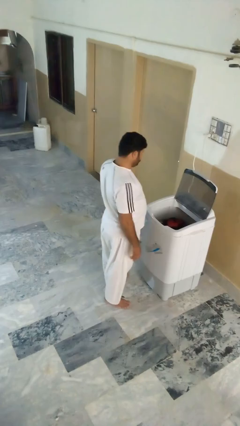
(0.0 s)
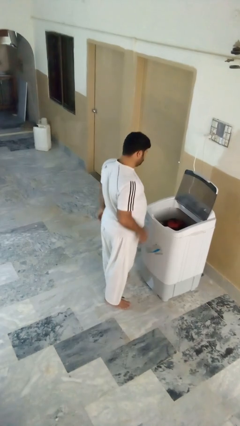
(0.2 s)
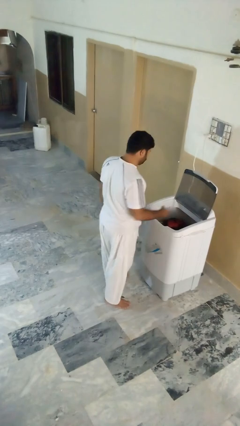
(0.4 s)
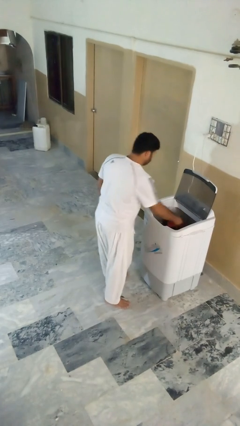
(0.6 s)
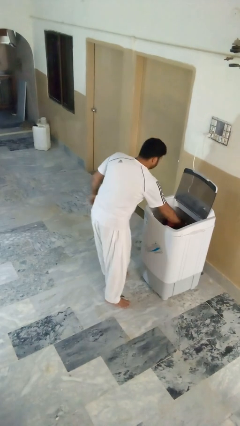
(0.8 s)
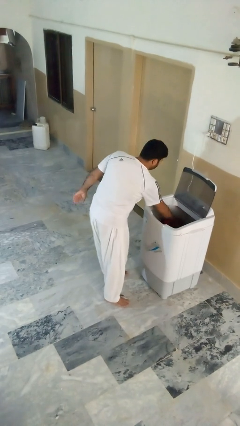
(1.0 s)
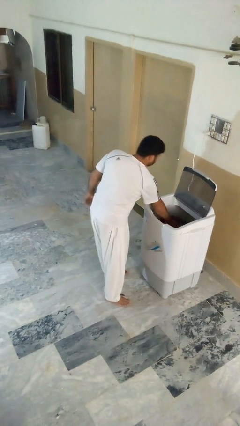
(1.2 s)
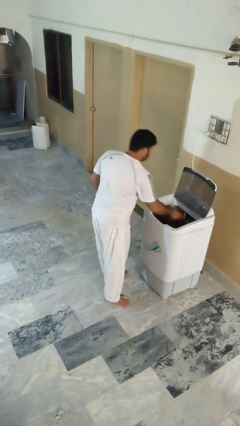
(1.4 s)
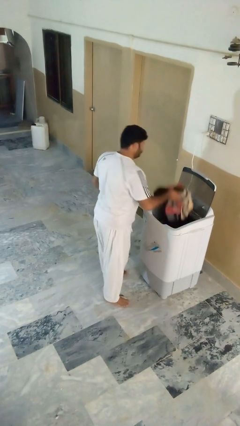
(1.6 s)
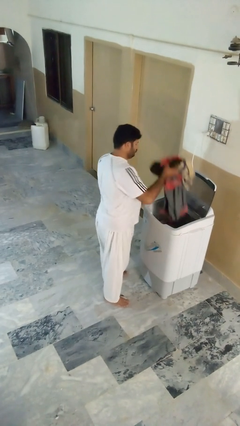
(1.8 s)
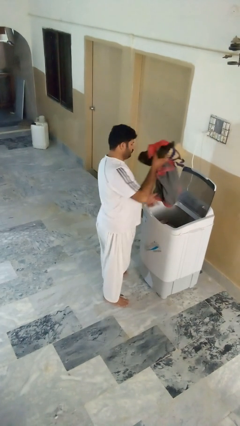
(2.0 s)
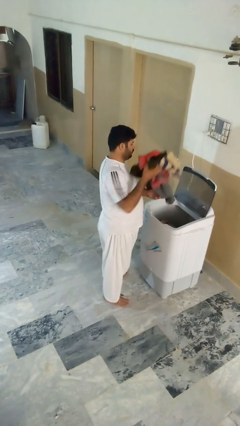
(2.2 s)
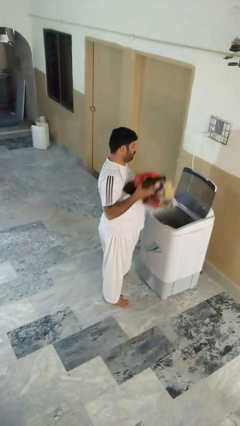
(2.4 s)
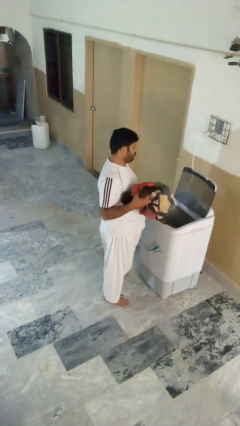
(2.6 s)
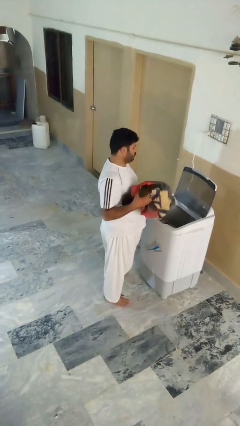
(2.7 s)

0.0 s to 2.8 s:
person unloads clotheswasher

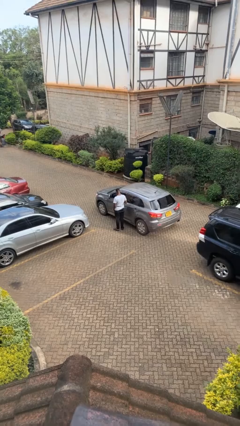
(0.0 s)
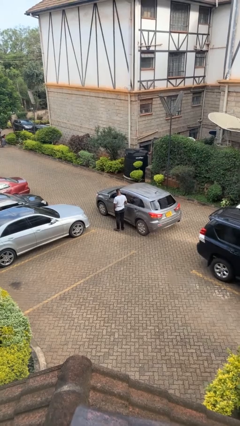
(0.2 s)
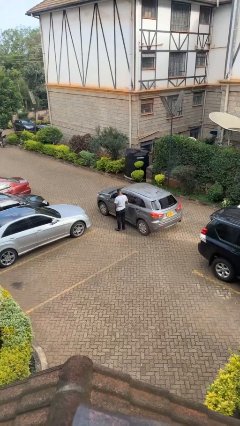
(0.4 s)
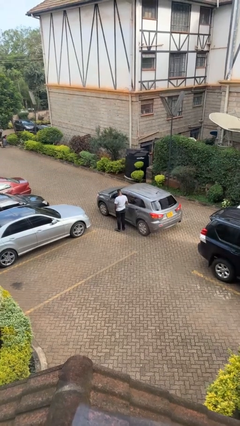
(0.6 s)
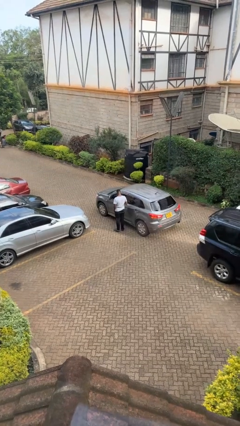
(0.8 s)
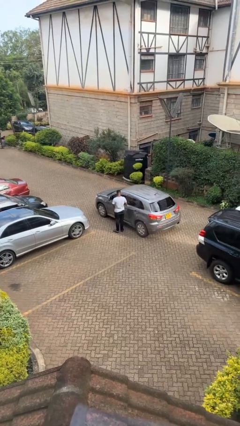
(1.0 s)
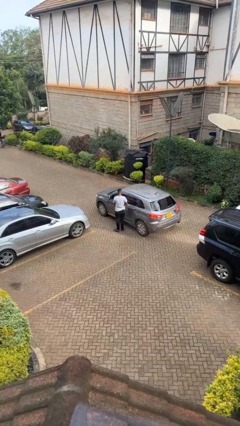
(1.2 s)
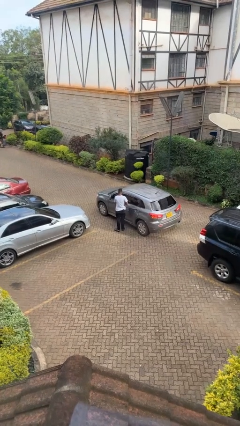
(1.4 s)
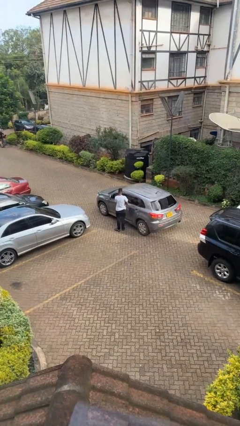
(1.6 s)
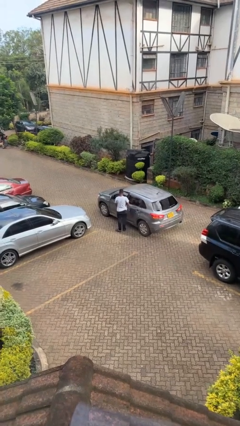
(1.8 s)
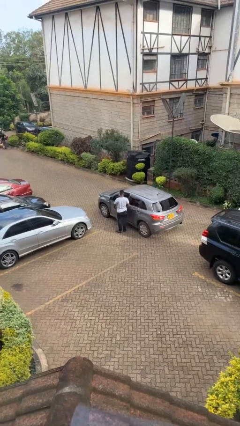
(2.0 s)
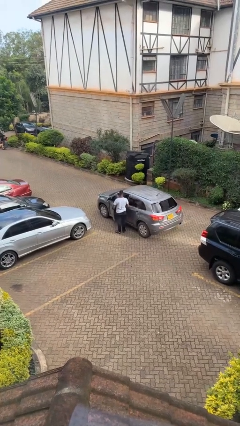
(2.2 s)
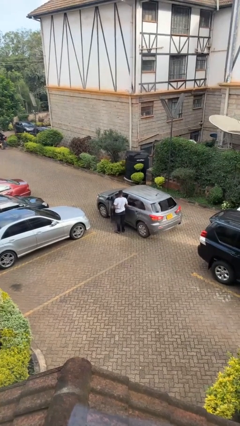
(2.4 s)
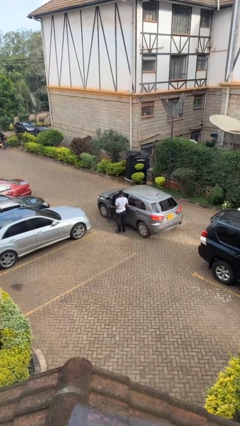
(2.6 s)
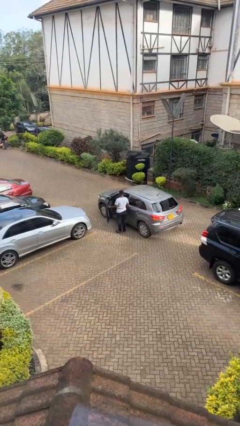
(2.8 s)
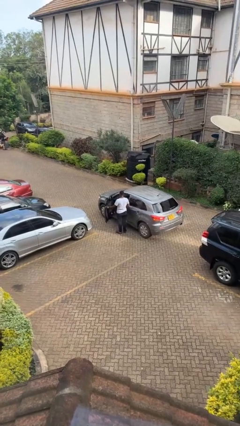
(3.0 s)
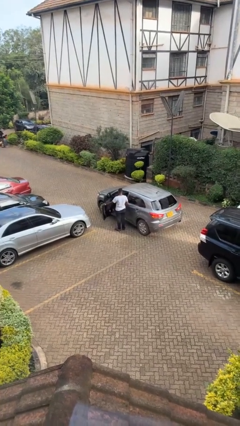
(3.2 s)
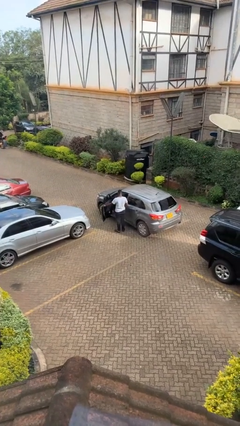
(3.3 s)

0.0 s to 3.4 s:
person opens car door

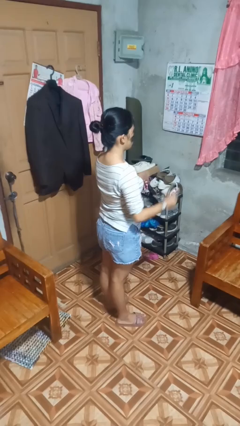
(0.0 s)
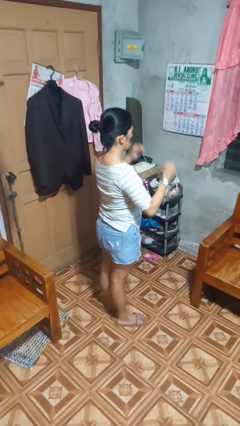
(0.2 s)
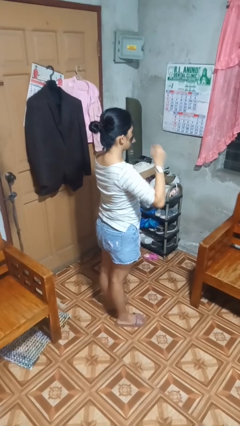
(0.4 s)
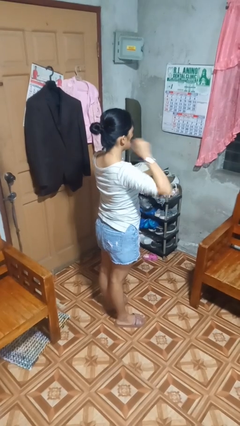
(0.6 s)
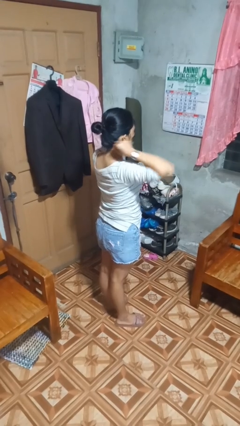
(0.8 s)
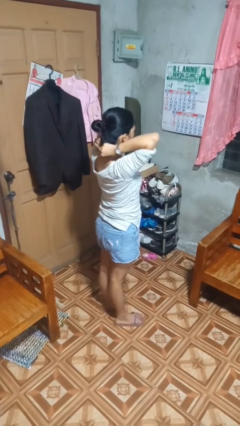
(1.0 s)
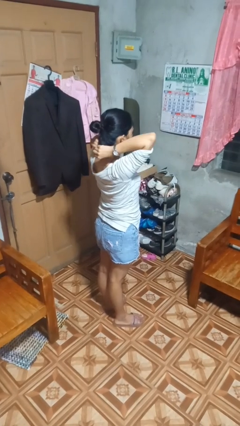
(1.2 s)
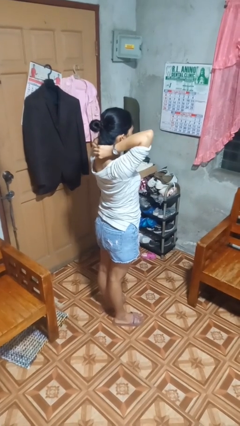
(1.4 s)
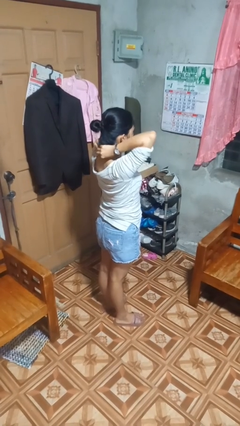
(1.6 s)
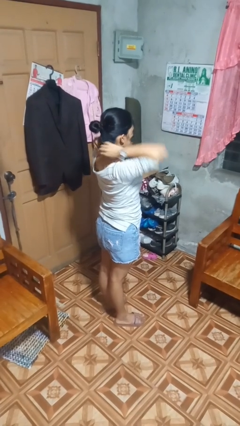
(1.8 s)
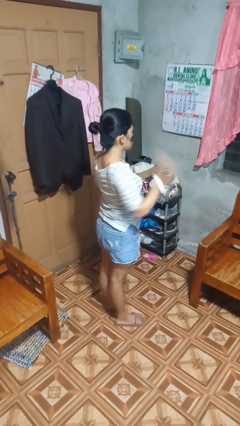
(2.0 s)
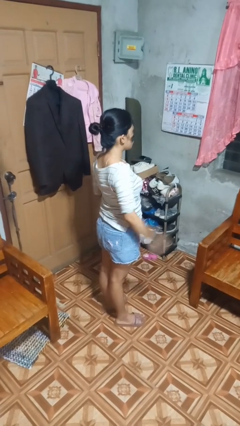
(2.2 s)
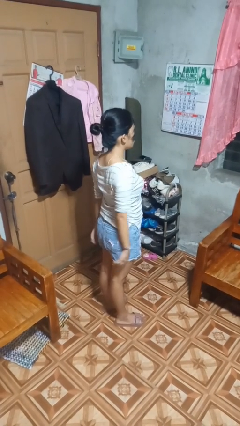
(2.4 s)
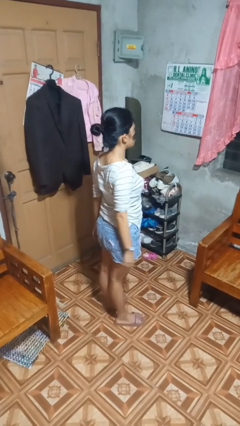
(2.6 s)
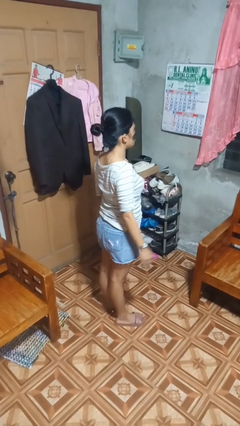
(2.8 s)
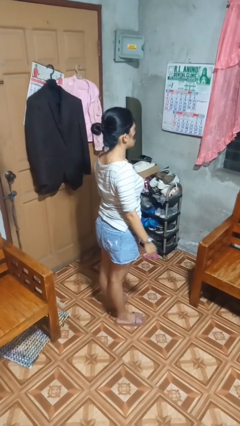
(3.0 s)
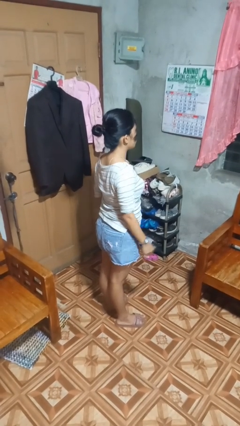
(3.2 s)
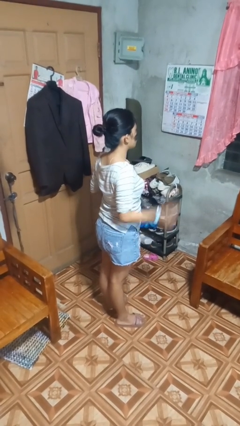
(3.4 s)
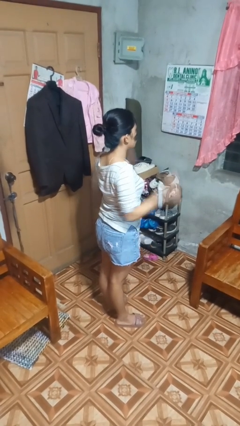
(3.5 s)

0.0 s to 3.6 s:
person puts on necklace

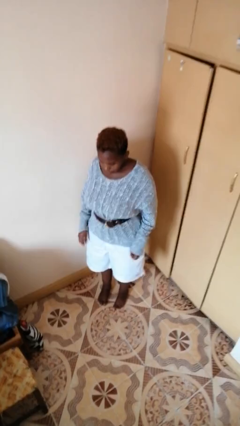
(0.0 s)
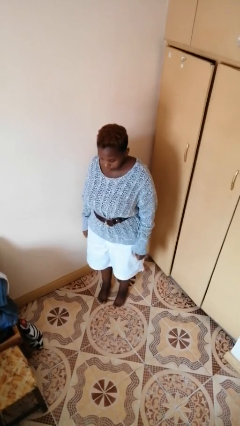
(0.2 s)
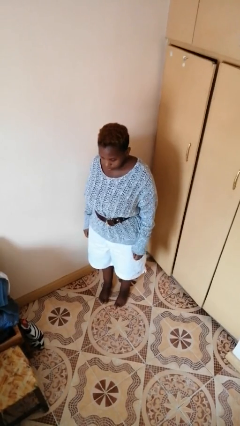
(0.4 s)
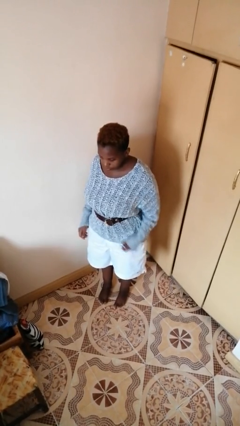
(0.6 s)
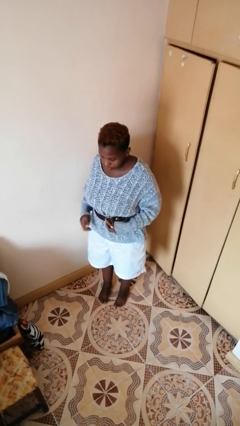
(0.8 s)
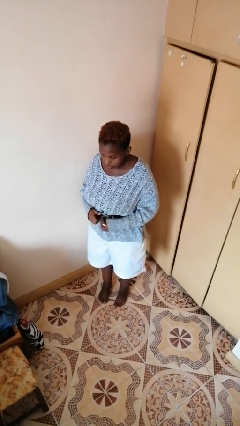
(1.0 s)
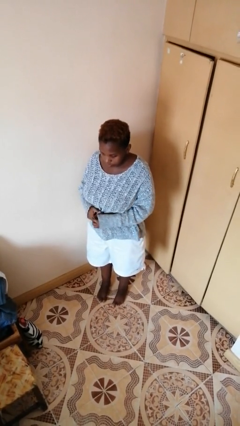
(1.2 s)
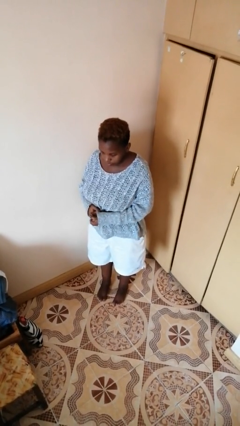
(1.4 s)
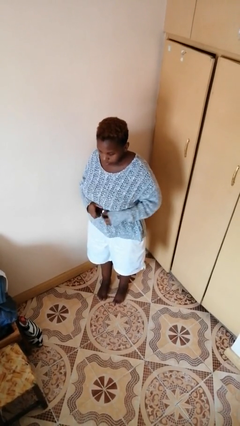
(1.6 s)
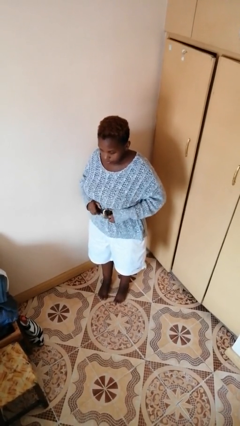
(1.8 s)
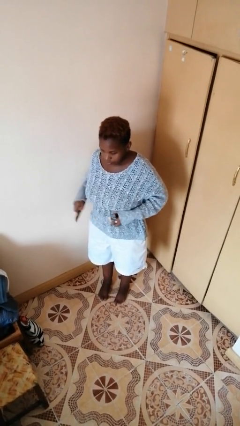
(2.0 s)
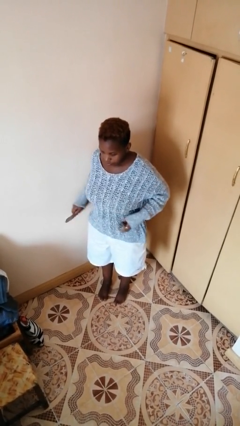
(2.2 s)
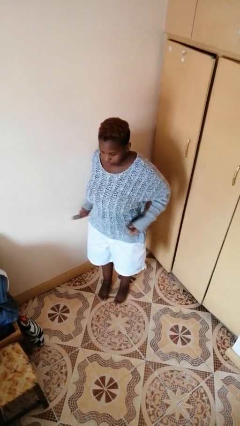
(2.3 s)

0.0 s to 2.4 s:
person takes off belt

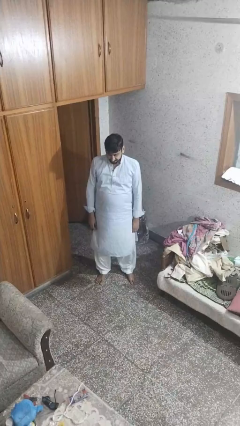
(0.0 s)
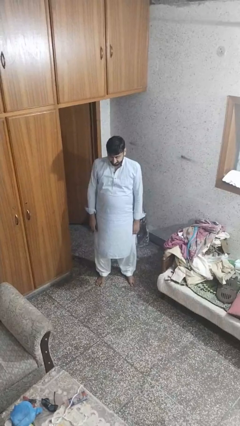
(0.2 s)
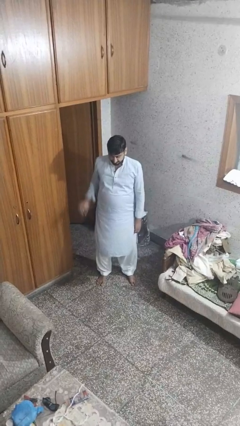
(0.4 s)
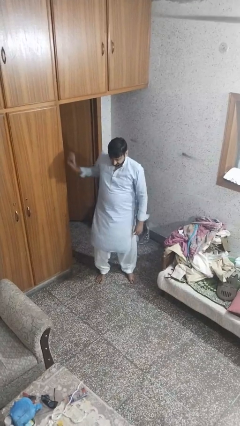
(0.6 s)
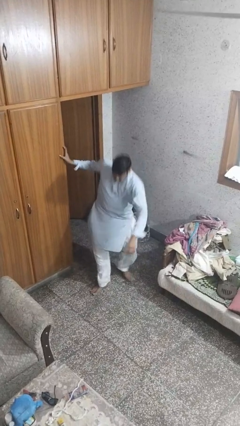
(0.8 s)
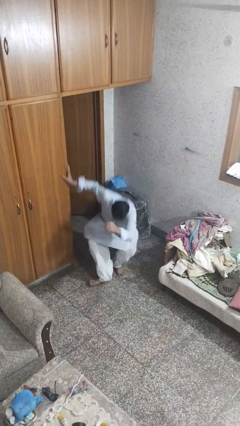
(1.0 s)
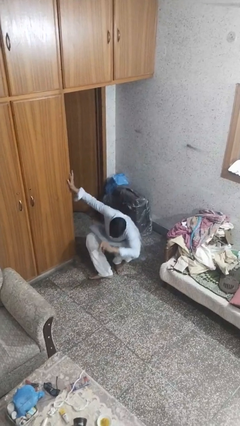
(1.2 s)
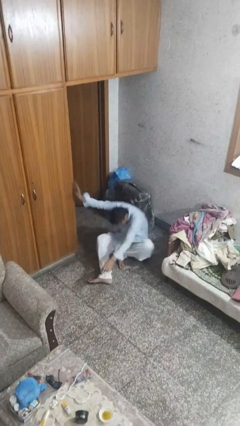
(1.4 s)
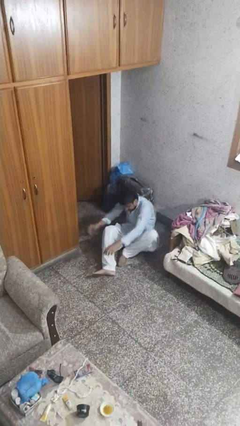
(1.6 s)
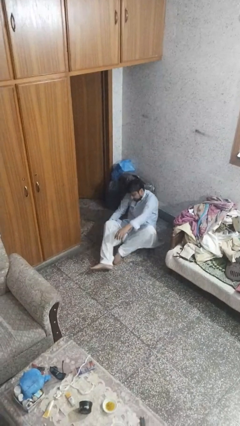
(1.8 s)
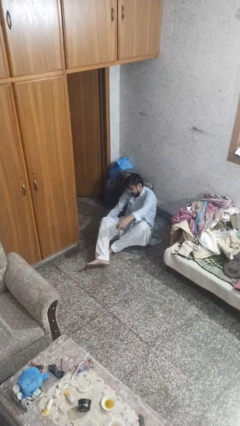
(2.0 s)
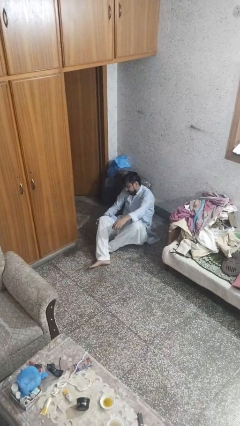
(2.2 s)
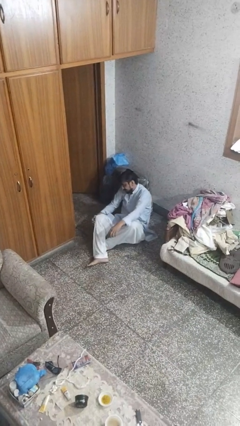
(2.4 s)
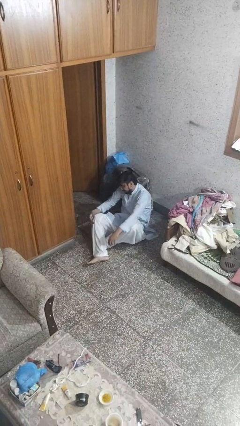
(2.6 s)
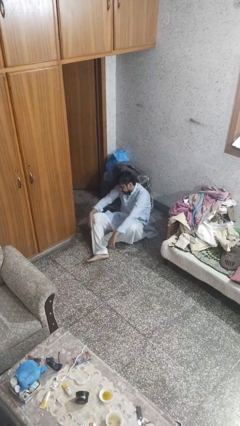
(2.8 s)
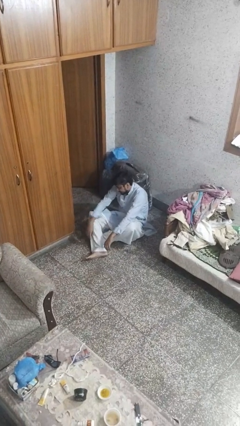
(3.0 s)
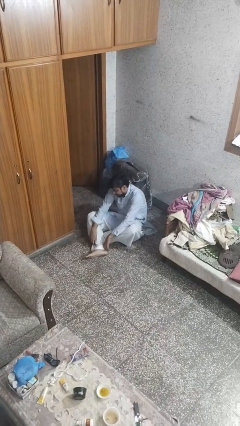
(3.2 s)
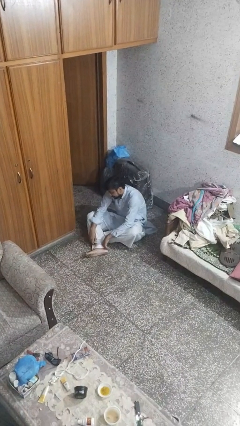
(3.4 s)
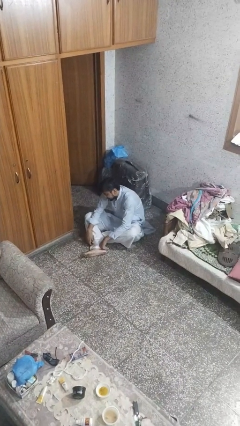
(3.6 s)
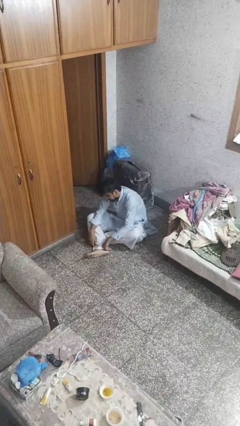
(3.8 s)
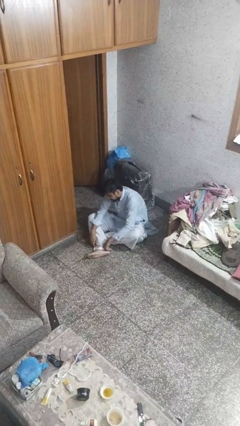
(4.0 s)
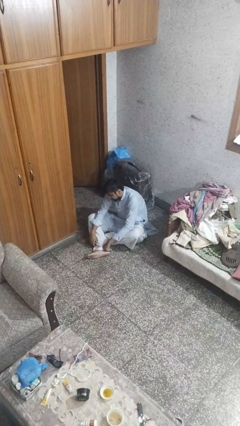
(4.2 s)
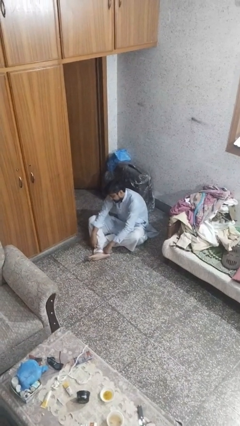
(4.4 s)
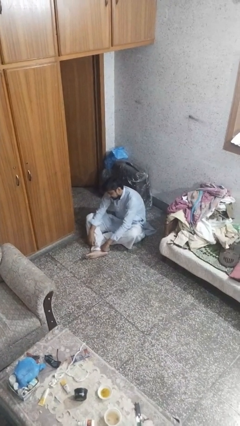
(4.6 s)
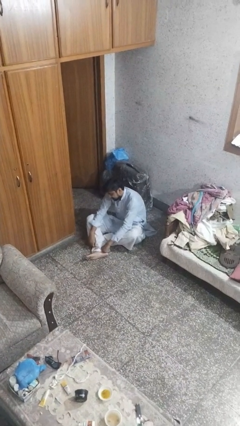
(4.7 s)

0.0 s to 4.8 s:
person falls while standing

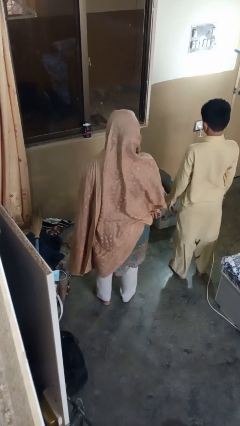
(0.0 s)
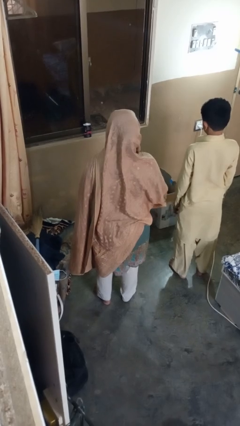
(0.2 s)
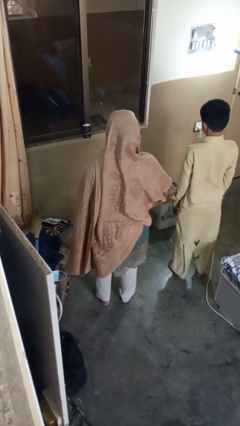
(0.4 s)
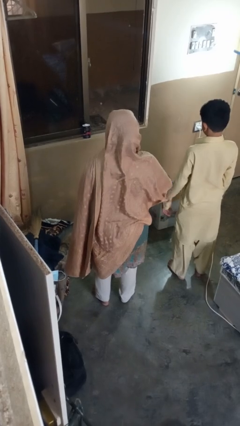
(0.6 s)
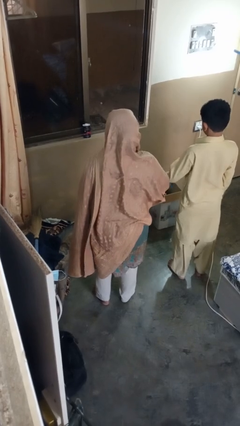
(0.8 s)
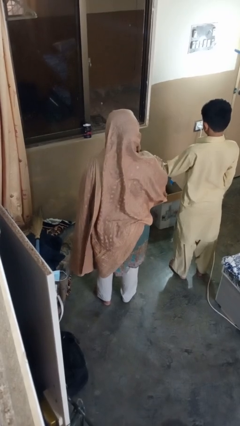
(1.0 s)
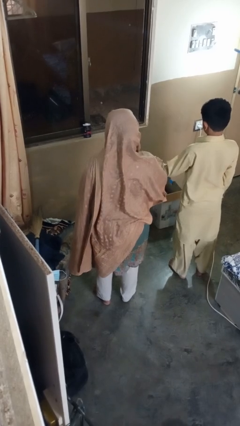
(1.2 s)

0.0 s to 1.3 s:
person grabs person by forearm
